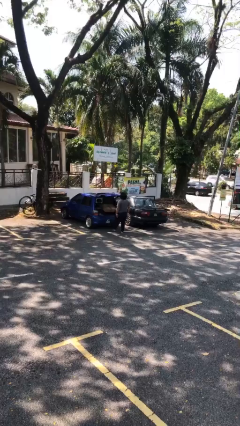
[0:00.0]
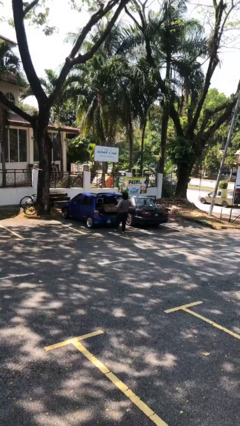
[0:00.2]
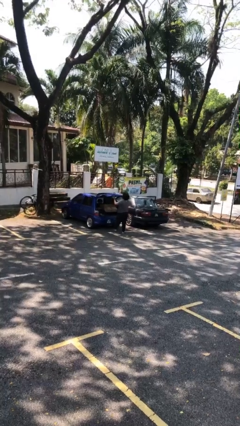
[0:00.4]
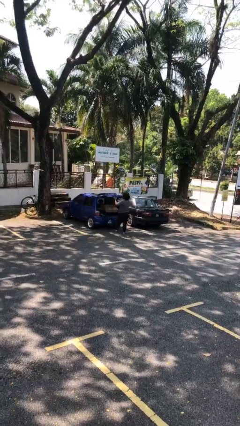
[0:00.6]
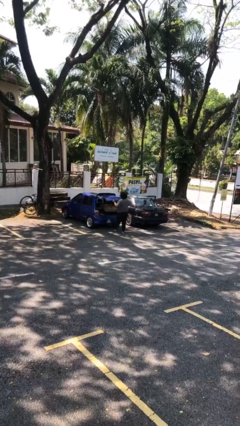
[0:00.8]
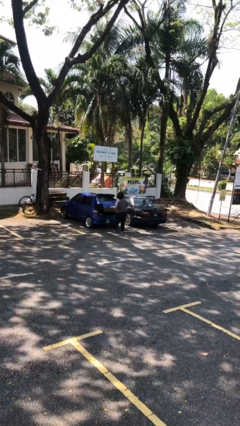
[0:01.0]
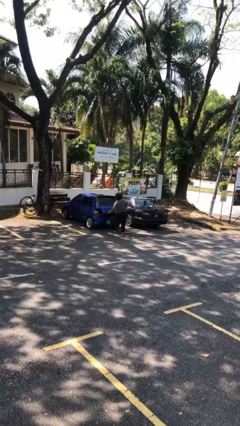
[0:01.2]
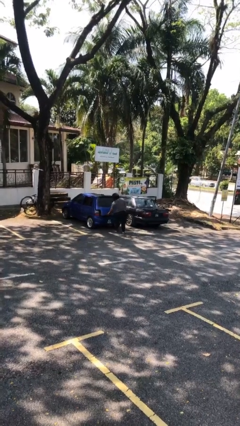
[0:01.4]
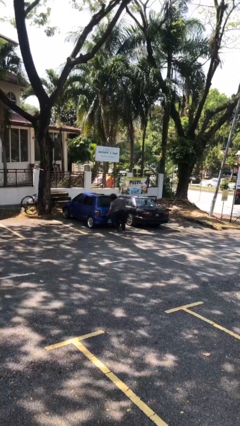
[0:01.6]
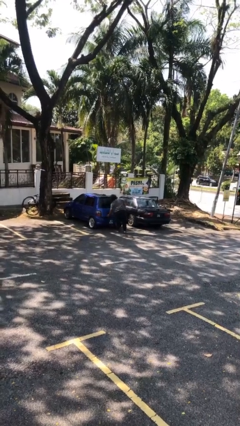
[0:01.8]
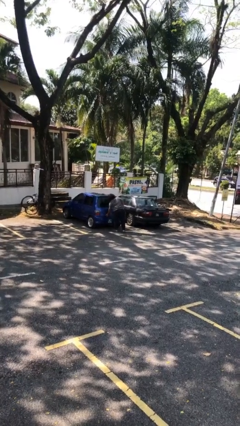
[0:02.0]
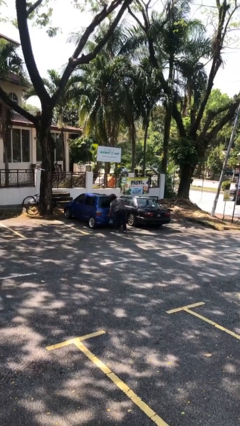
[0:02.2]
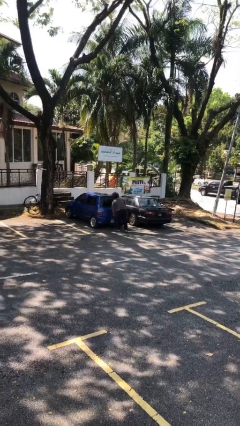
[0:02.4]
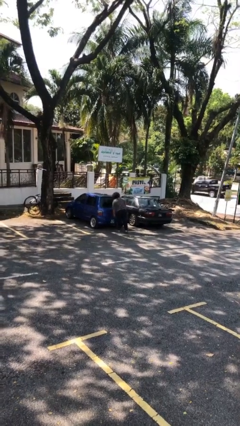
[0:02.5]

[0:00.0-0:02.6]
person closes car trunk

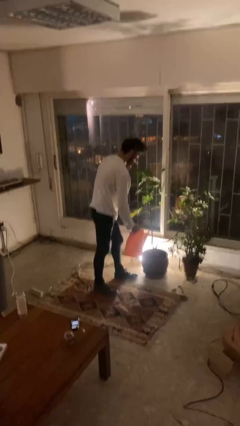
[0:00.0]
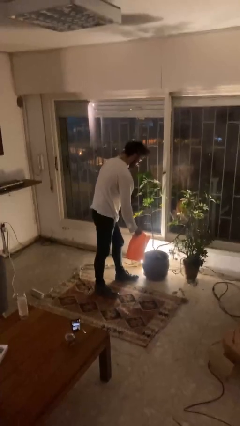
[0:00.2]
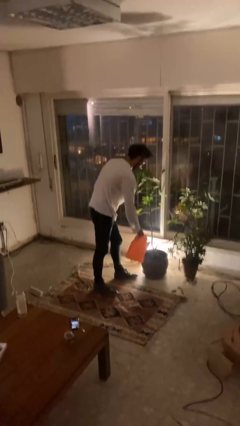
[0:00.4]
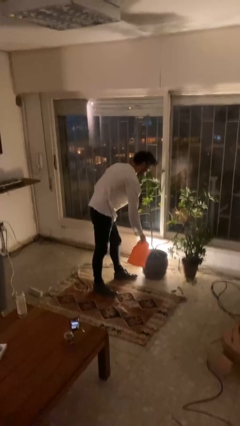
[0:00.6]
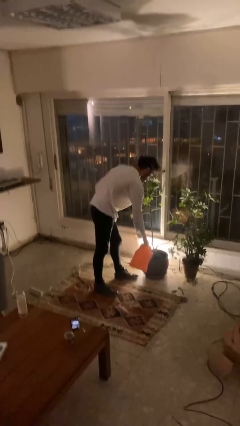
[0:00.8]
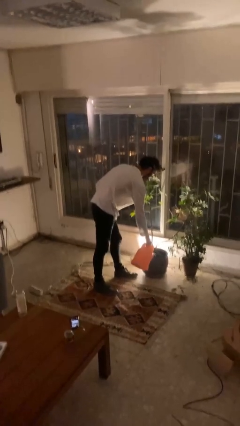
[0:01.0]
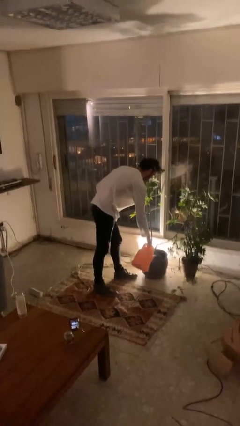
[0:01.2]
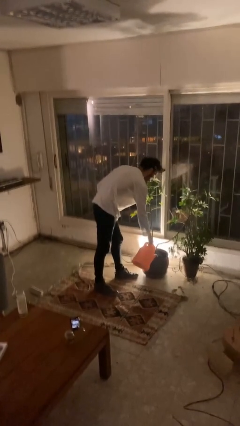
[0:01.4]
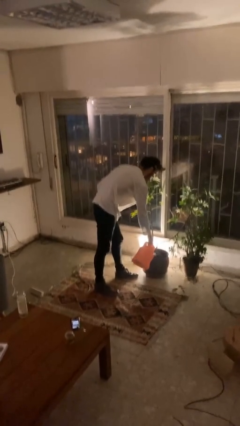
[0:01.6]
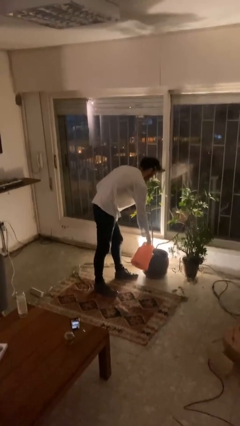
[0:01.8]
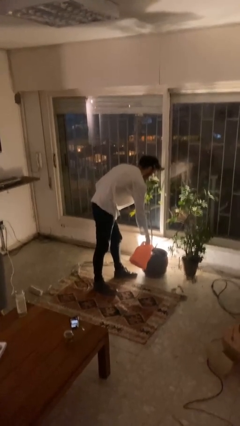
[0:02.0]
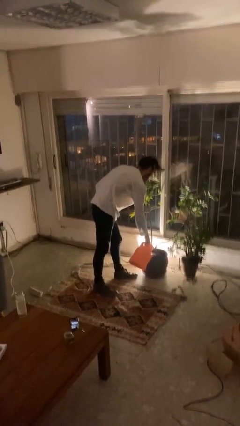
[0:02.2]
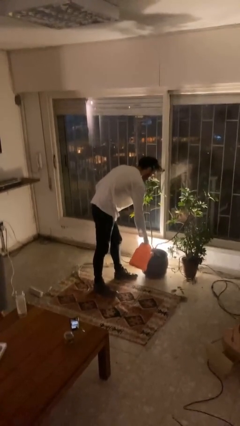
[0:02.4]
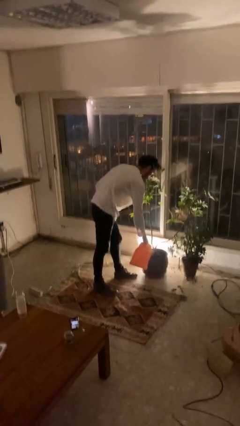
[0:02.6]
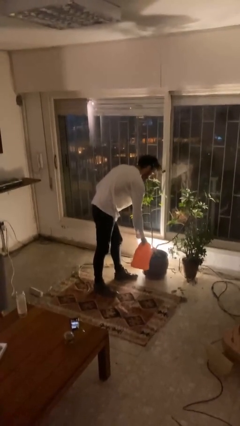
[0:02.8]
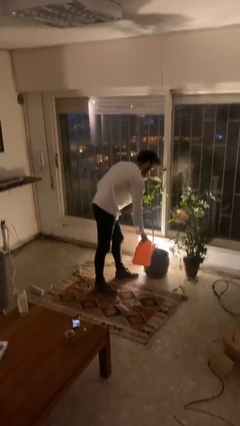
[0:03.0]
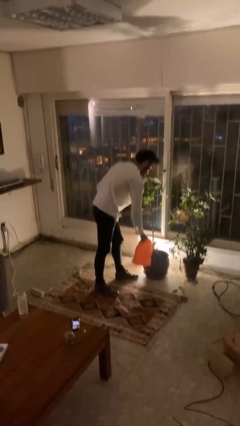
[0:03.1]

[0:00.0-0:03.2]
person waters houseplant

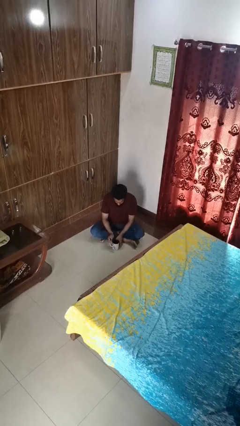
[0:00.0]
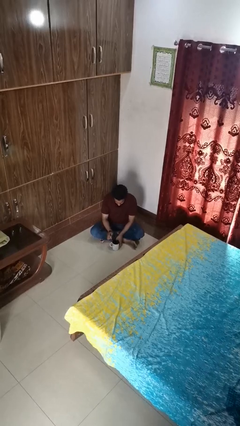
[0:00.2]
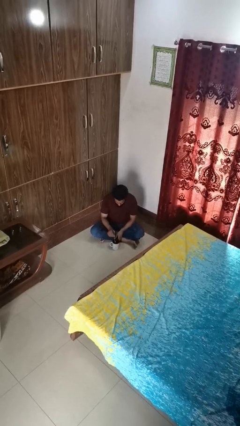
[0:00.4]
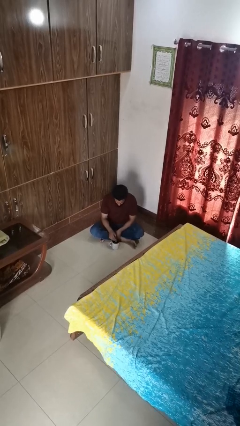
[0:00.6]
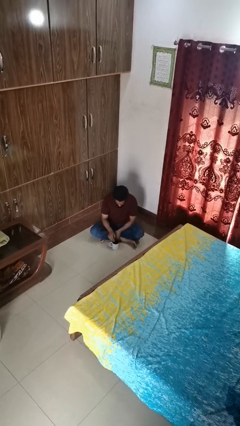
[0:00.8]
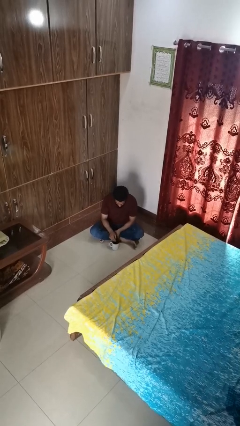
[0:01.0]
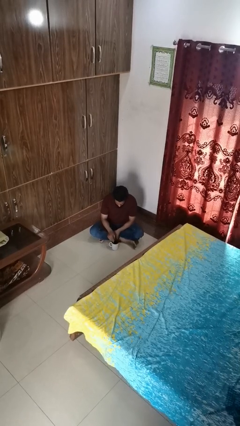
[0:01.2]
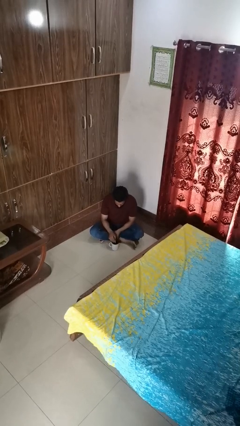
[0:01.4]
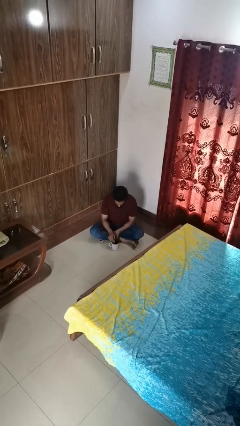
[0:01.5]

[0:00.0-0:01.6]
person stirs mug

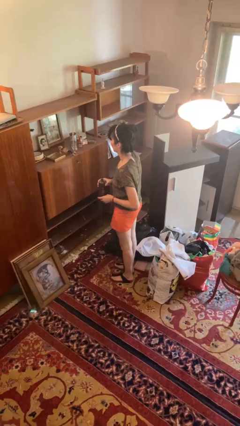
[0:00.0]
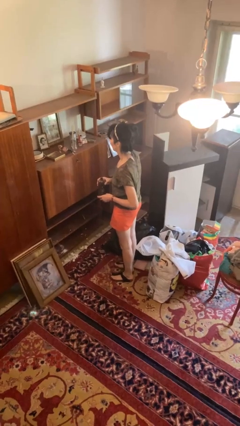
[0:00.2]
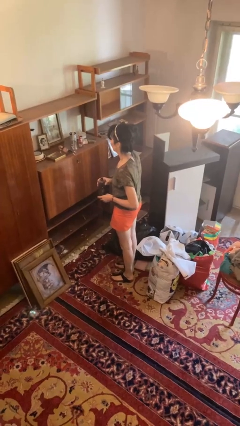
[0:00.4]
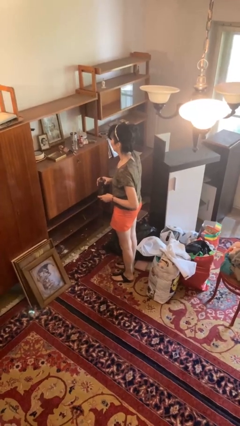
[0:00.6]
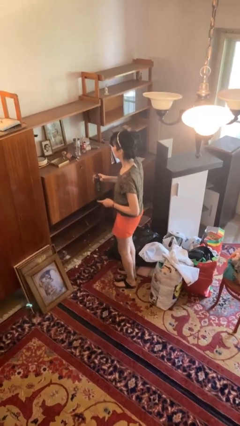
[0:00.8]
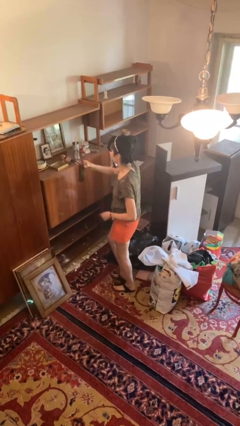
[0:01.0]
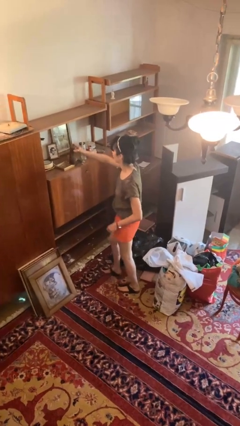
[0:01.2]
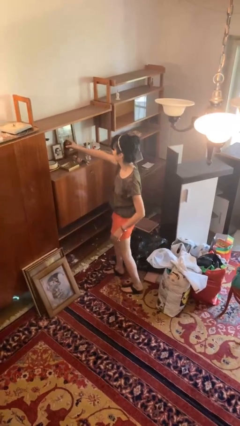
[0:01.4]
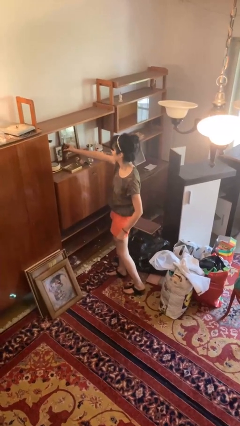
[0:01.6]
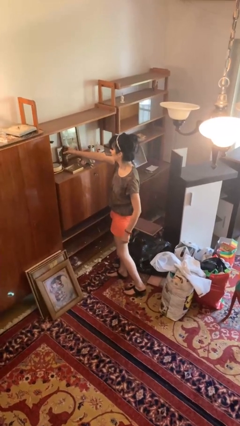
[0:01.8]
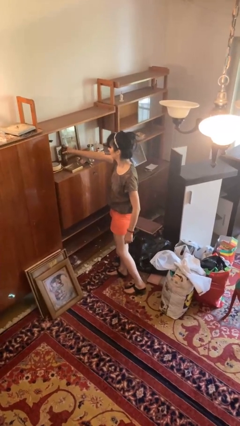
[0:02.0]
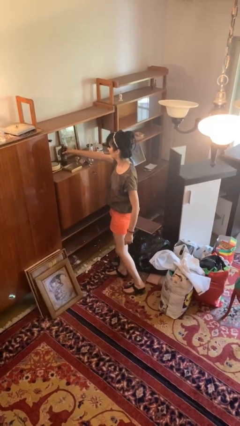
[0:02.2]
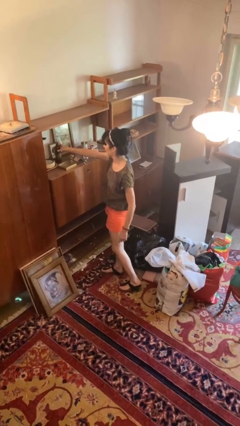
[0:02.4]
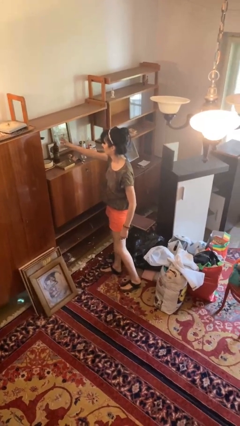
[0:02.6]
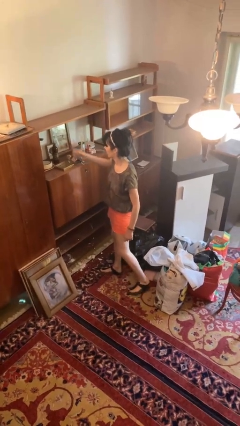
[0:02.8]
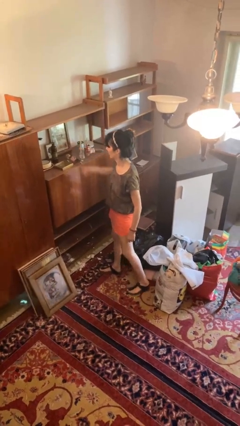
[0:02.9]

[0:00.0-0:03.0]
person puts down object on countertop

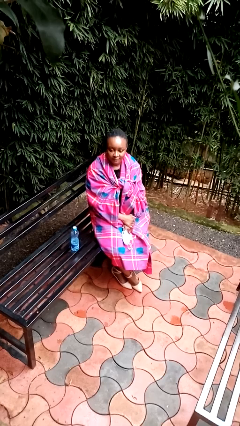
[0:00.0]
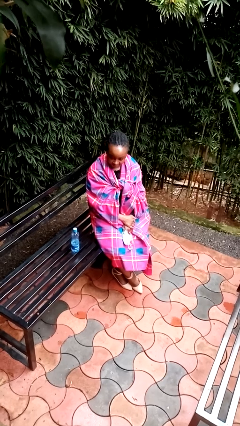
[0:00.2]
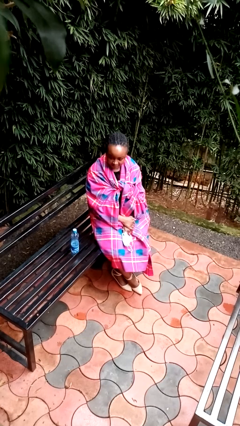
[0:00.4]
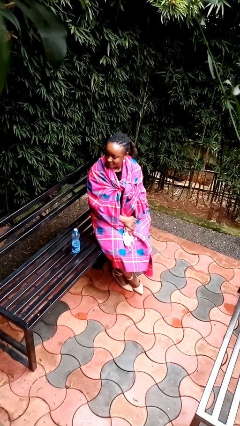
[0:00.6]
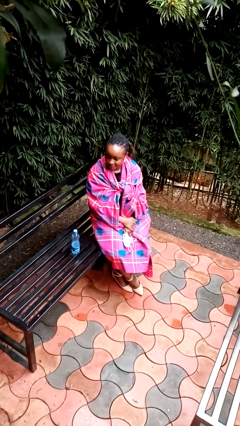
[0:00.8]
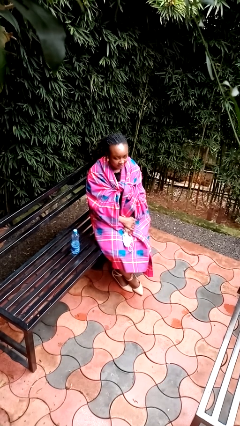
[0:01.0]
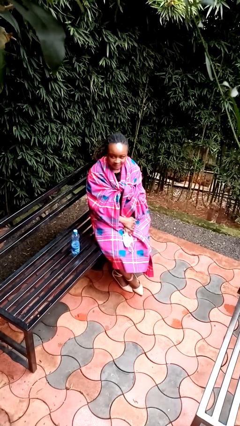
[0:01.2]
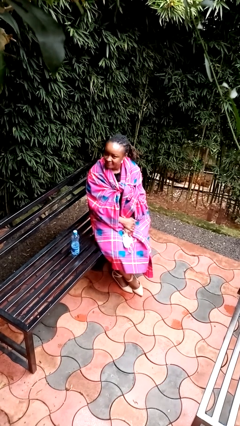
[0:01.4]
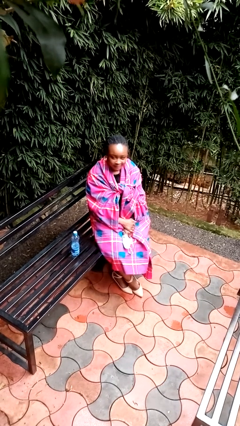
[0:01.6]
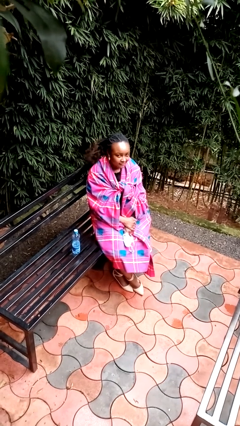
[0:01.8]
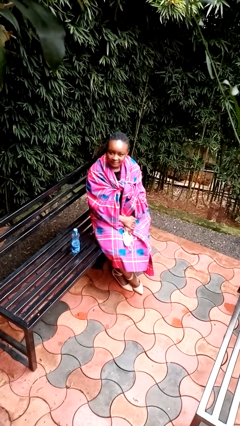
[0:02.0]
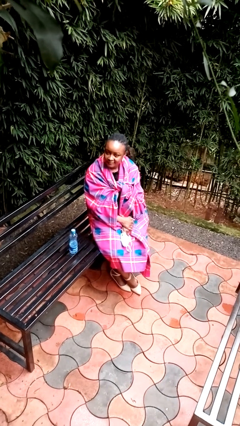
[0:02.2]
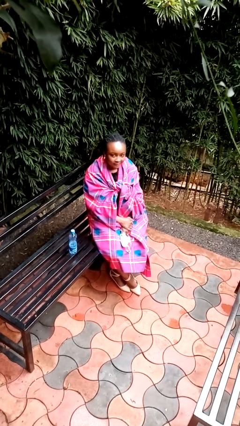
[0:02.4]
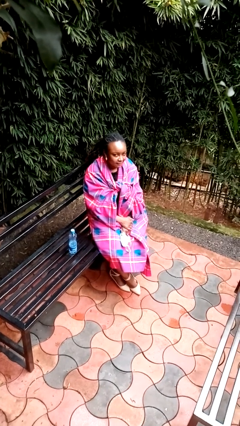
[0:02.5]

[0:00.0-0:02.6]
person shakes head

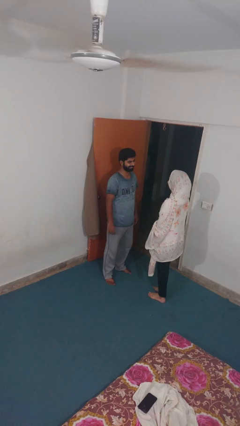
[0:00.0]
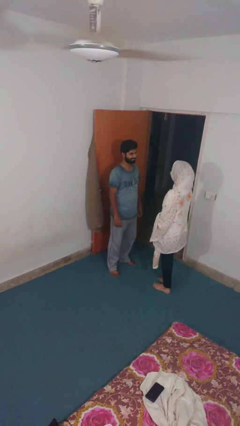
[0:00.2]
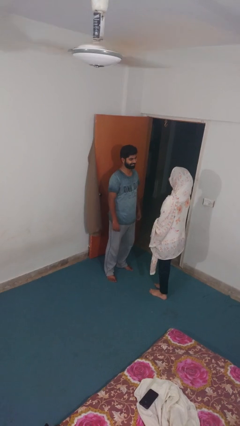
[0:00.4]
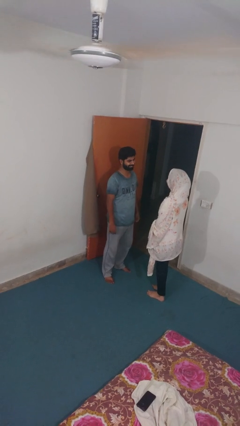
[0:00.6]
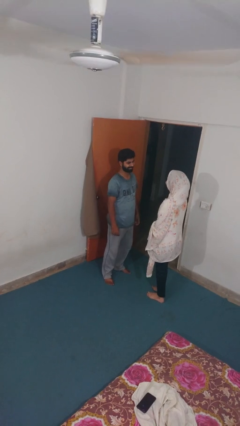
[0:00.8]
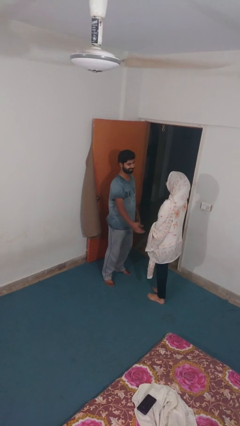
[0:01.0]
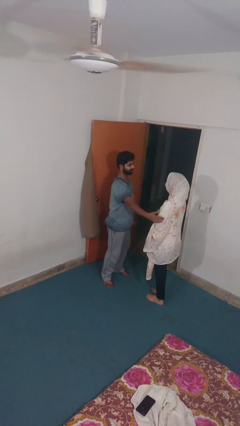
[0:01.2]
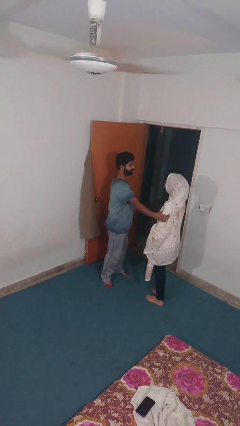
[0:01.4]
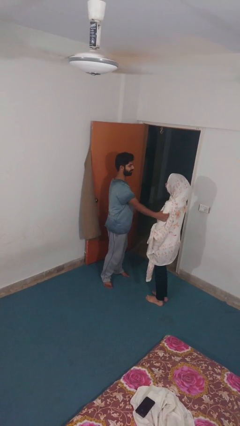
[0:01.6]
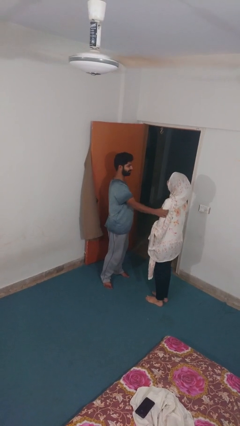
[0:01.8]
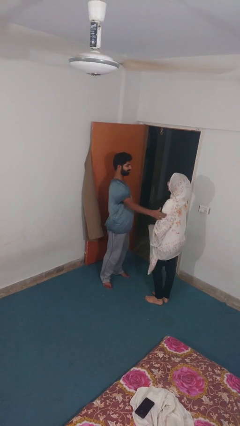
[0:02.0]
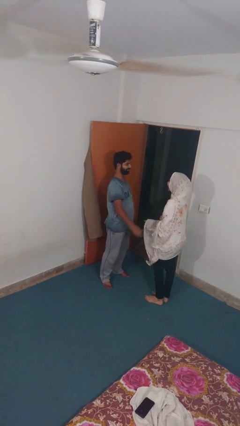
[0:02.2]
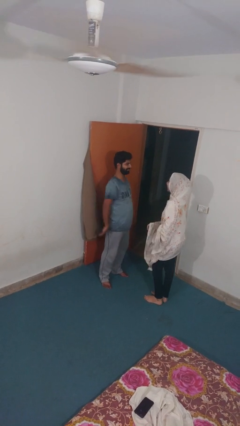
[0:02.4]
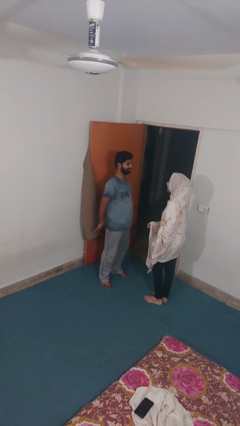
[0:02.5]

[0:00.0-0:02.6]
person grabs person by bicep

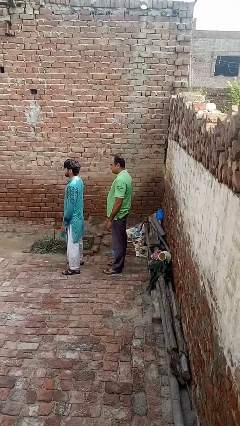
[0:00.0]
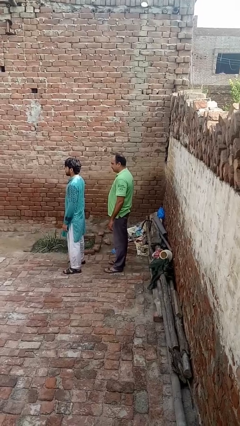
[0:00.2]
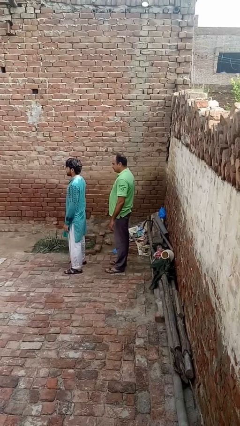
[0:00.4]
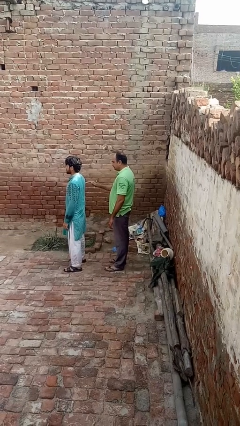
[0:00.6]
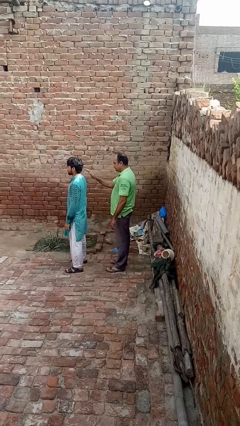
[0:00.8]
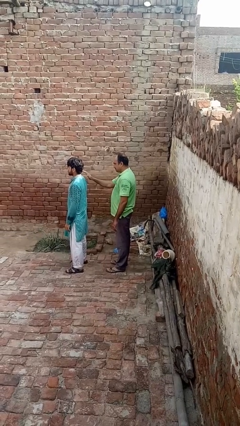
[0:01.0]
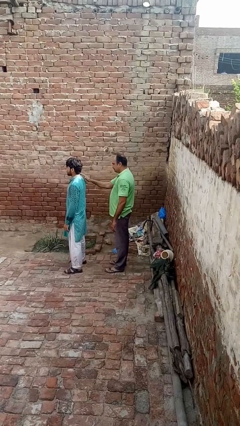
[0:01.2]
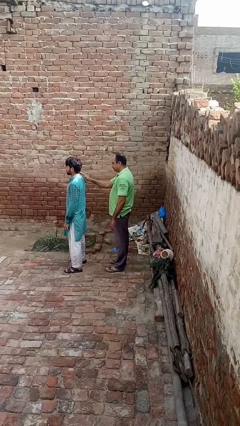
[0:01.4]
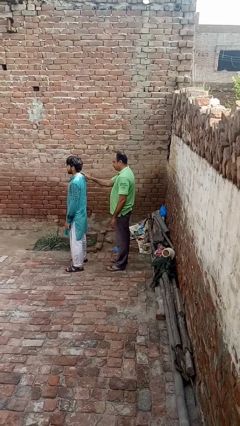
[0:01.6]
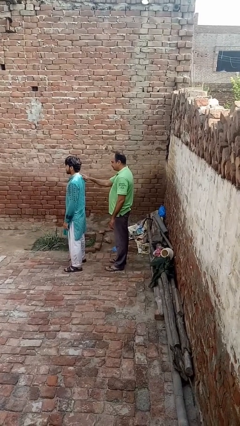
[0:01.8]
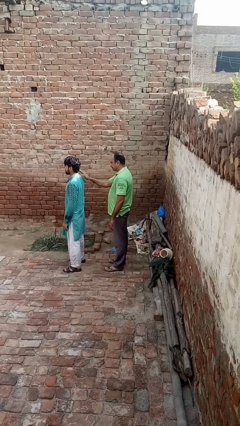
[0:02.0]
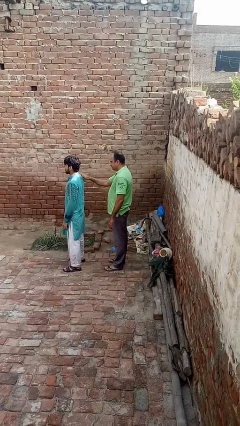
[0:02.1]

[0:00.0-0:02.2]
person touches back of person
